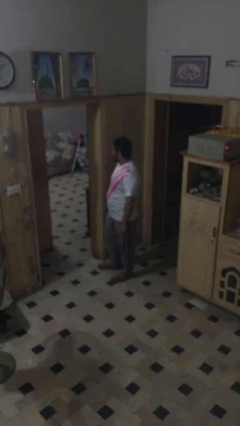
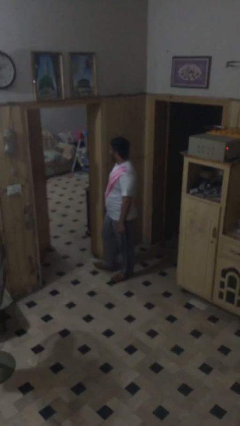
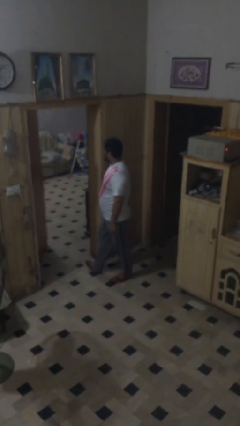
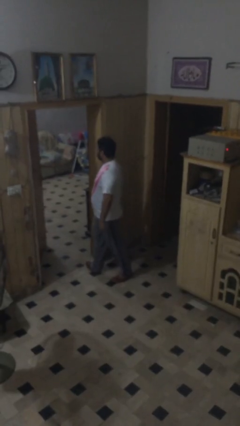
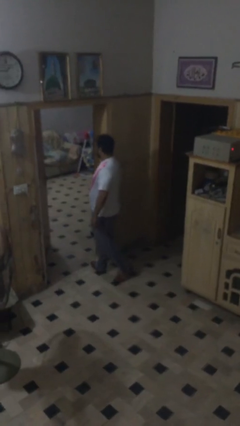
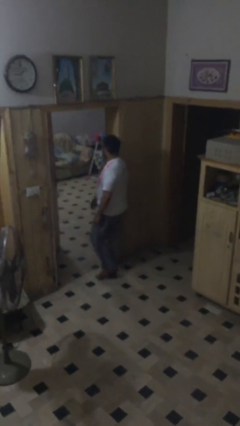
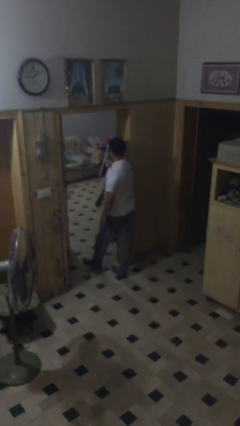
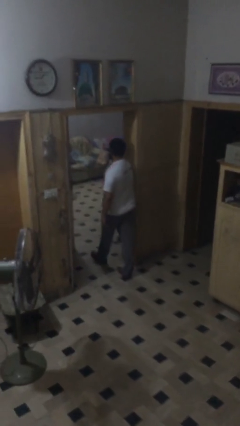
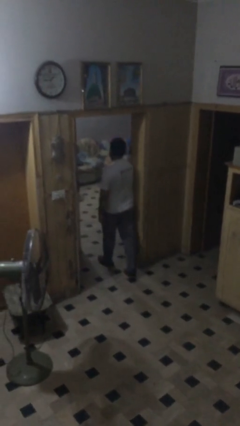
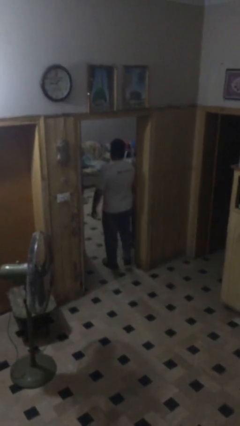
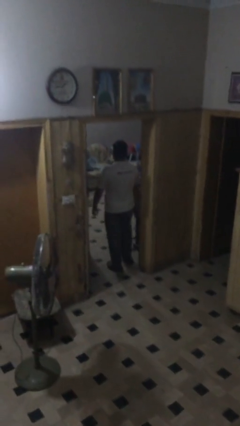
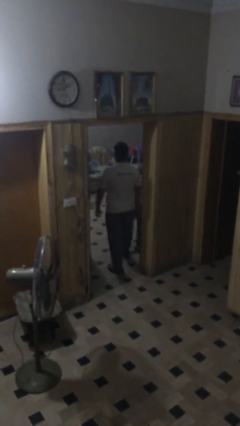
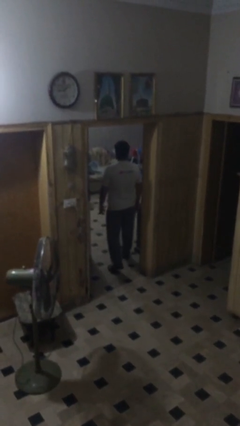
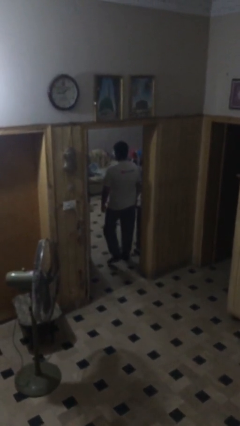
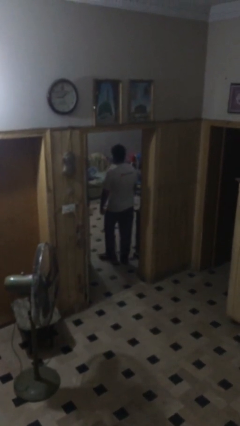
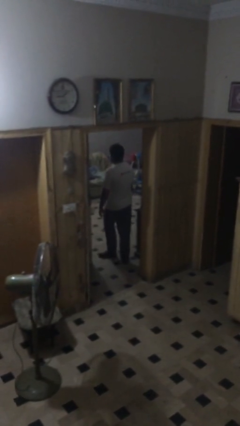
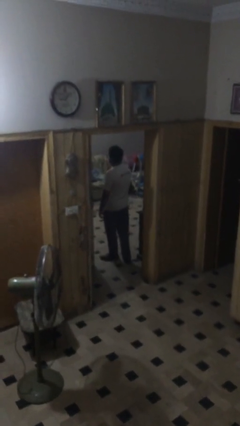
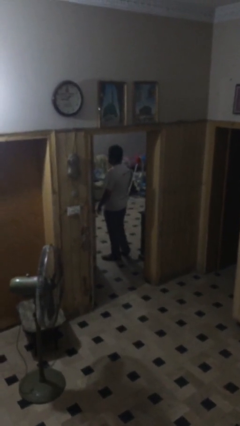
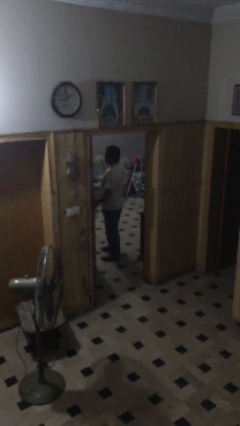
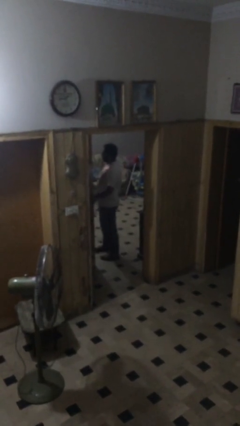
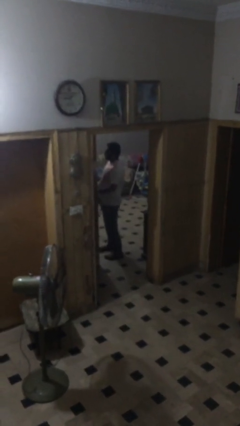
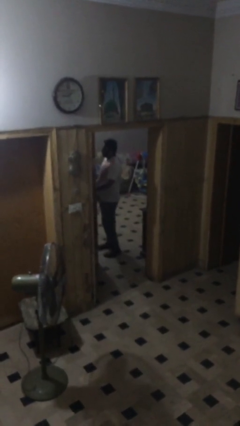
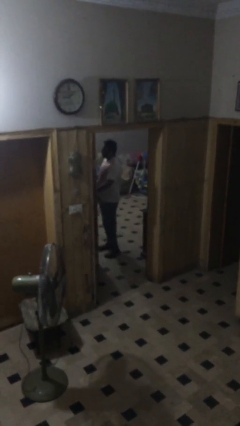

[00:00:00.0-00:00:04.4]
person exits scene through structure

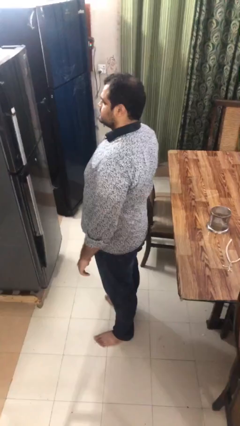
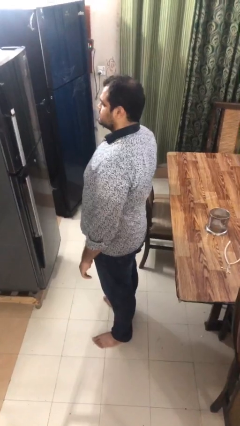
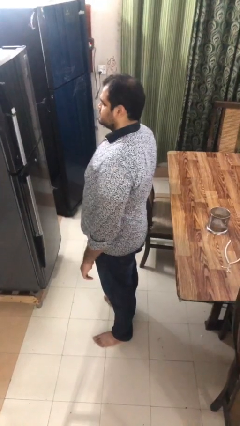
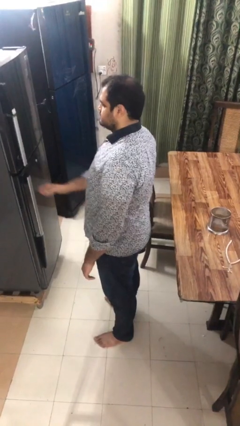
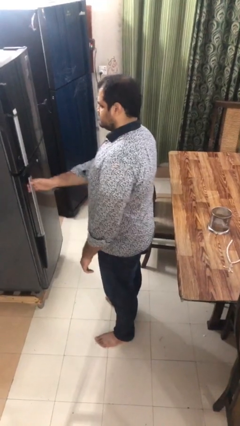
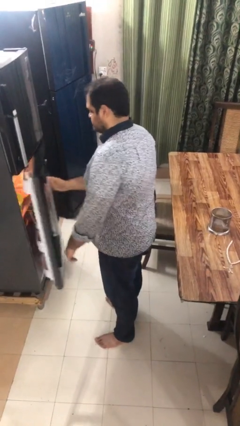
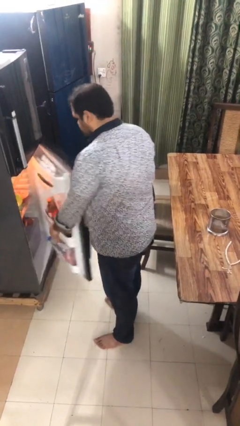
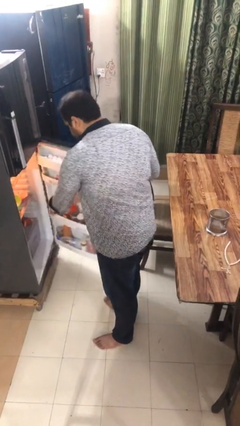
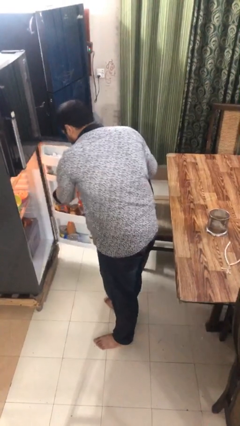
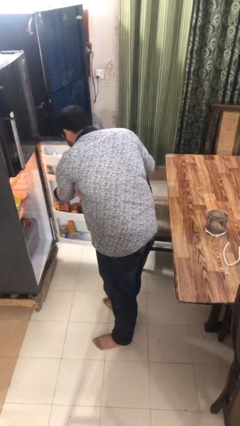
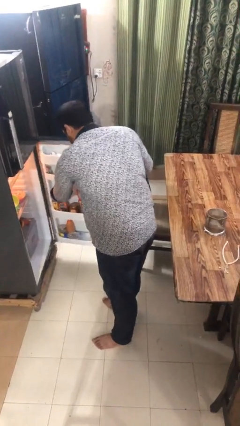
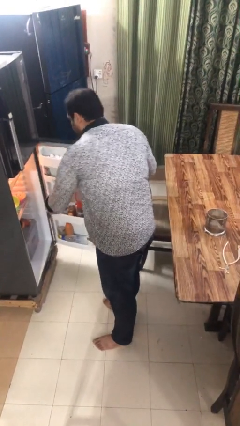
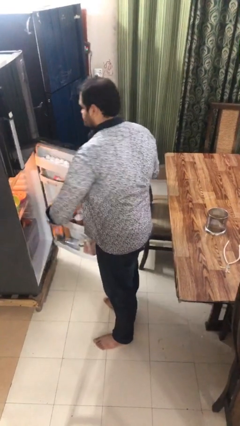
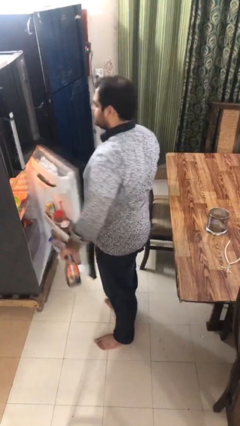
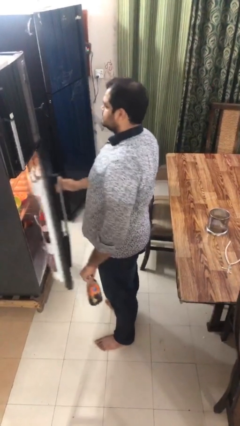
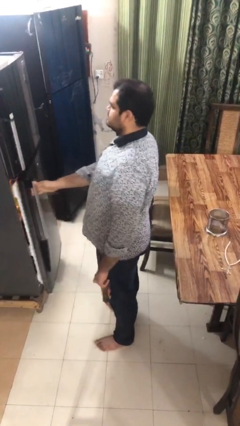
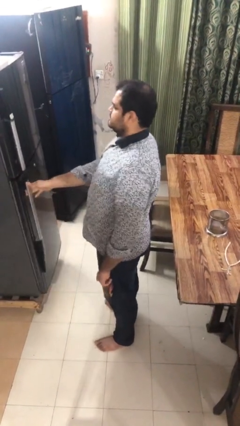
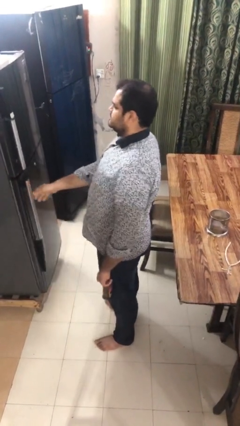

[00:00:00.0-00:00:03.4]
person takes object from refrigerator

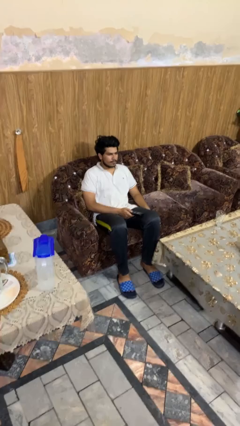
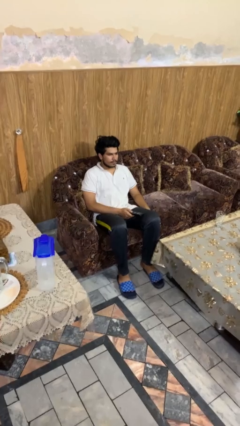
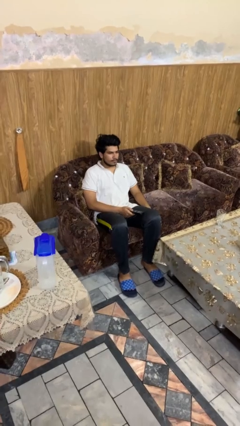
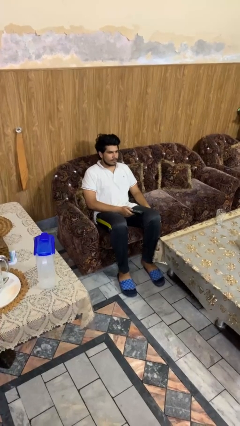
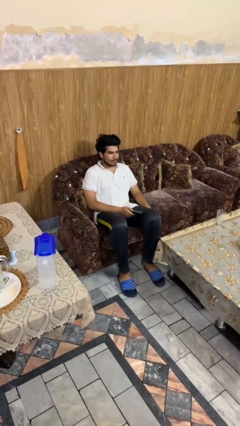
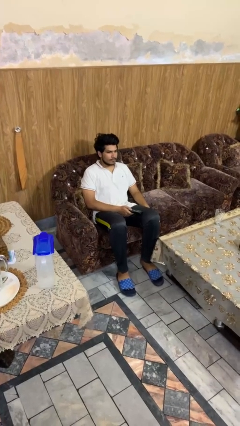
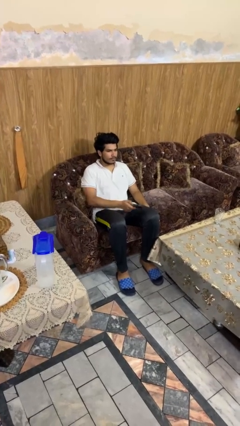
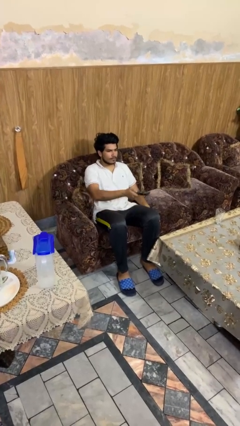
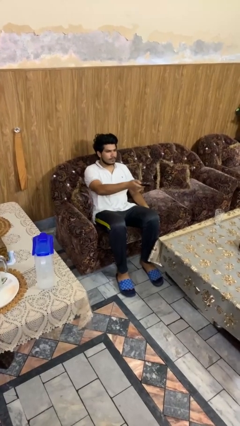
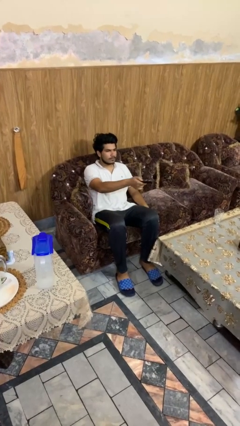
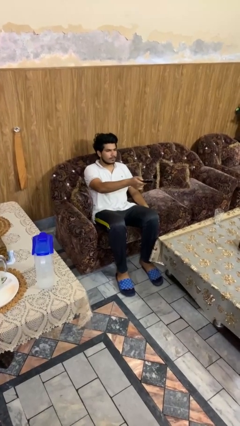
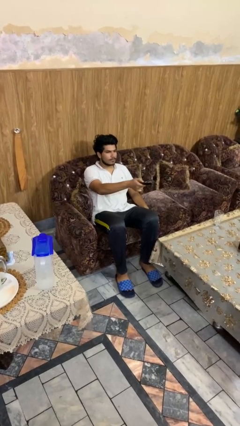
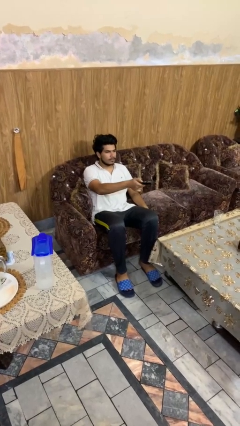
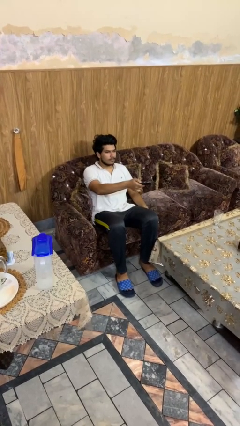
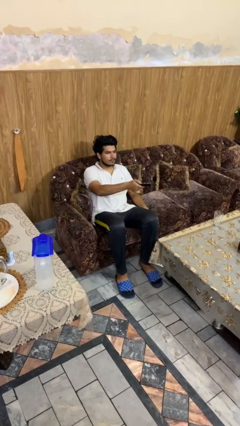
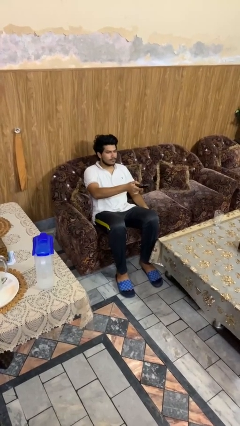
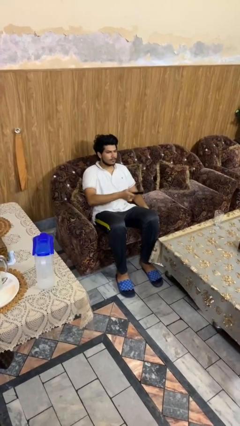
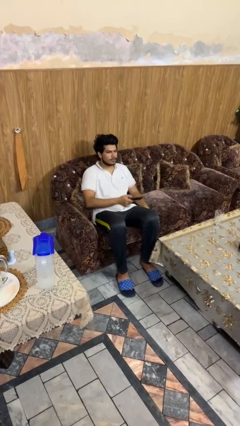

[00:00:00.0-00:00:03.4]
person uses television remote

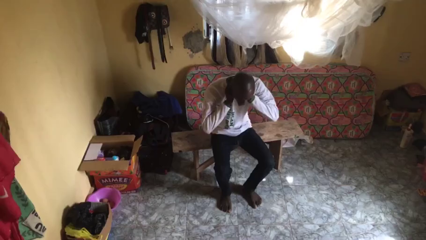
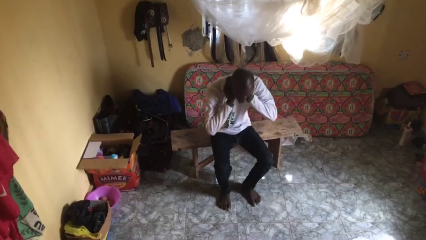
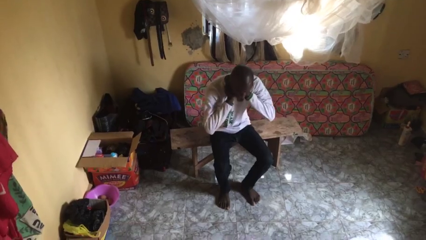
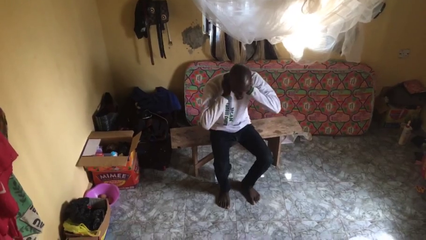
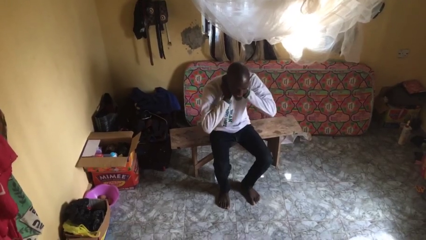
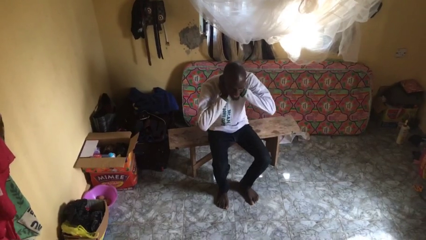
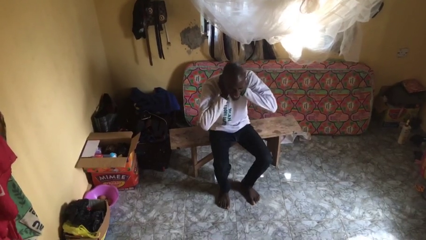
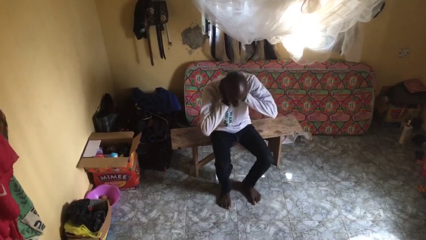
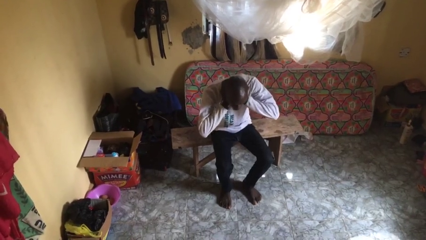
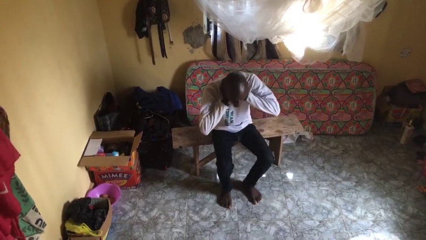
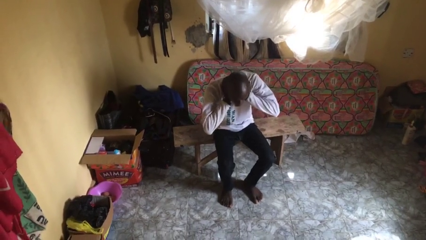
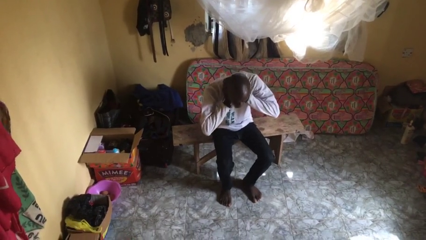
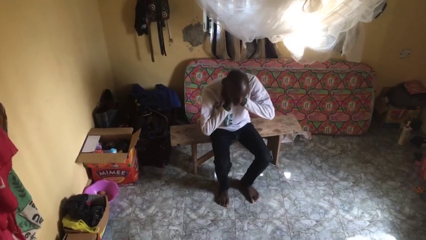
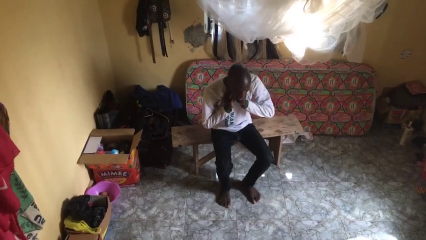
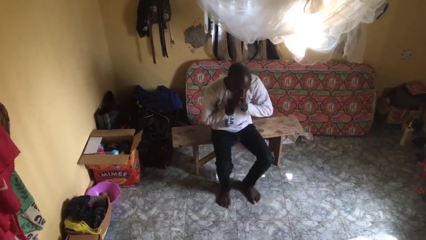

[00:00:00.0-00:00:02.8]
person rubs neck

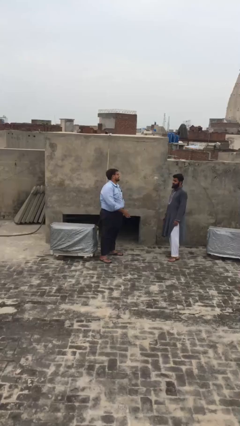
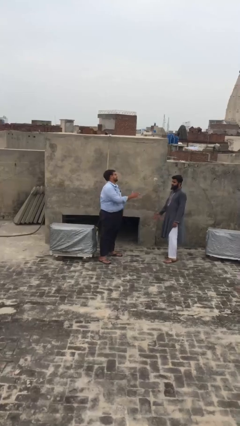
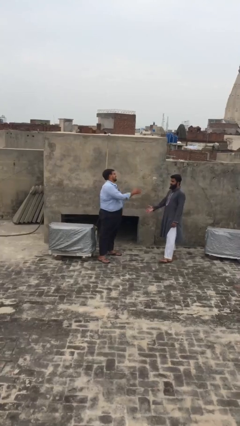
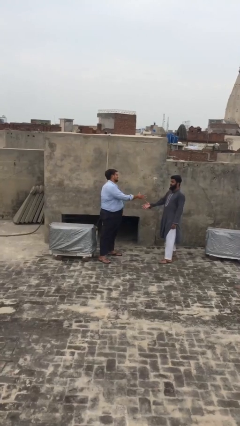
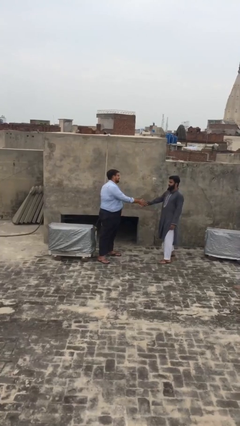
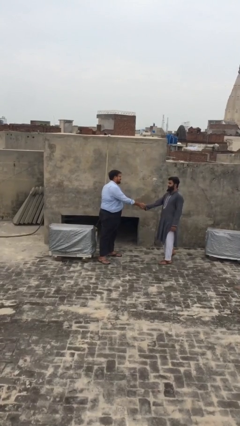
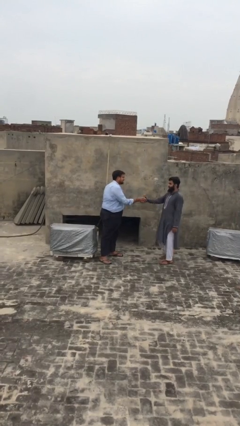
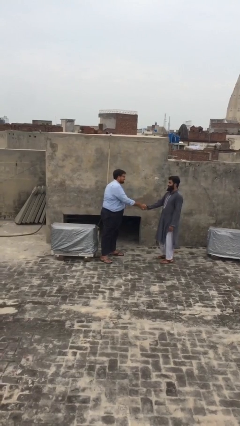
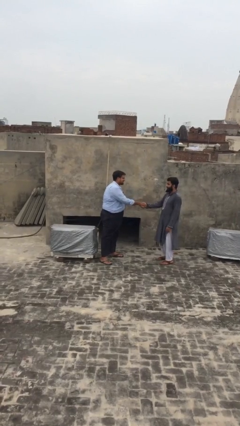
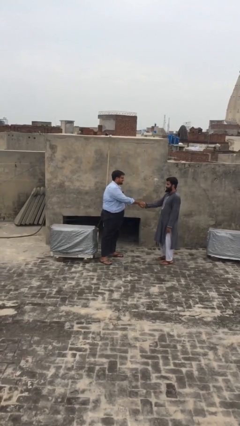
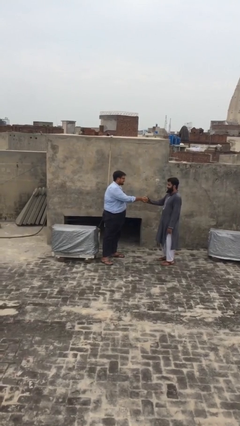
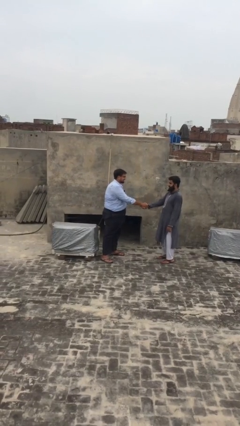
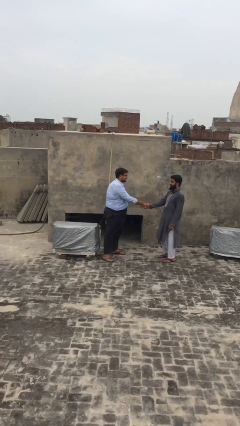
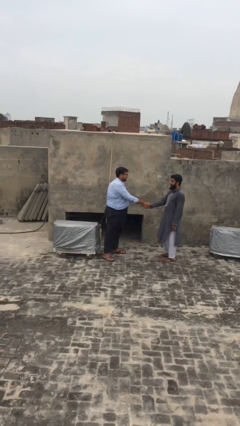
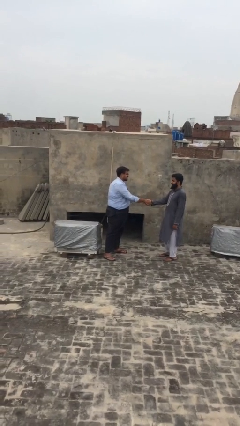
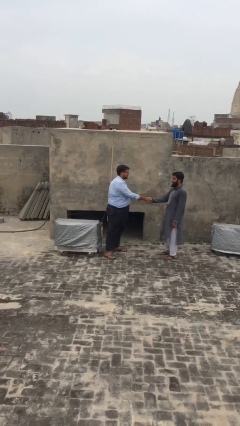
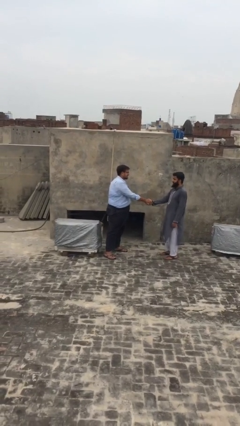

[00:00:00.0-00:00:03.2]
person shakes hand
